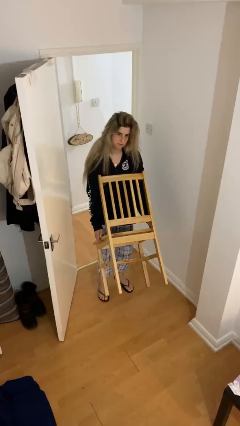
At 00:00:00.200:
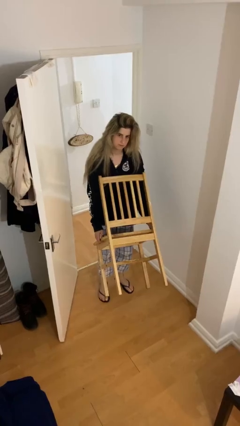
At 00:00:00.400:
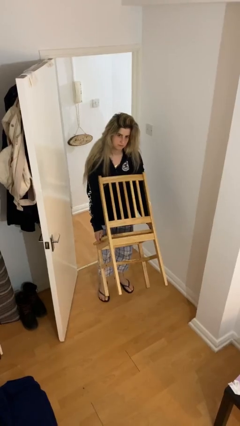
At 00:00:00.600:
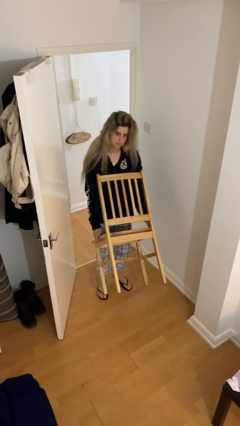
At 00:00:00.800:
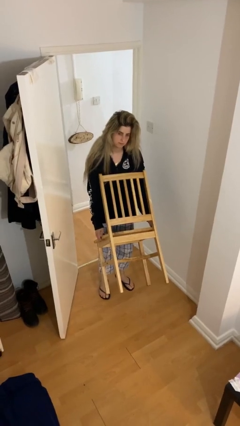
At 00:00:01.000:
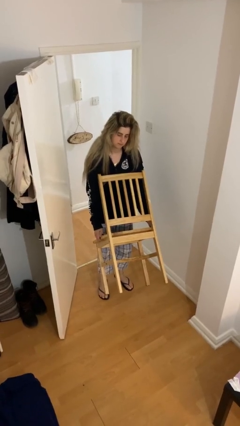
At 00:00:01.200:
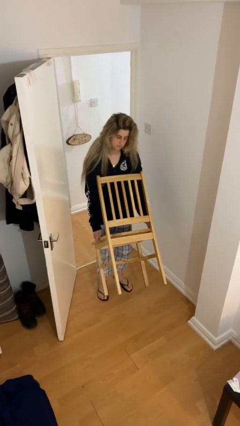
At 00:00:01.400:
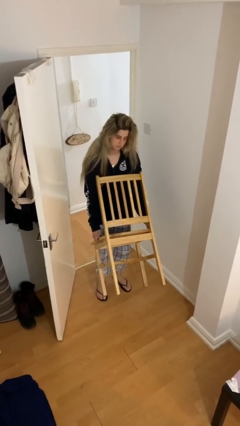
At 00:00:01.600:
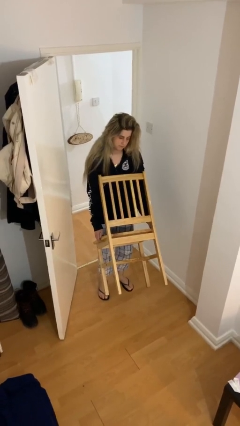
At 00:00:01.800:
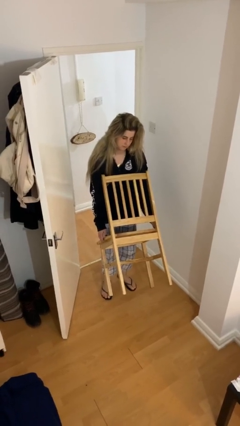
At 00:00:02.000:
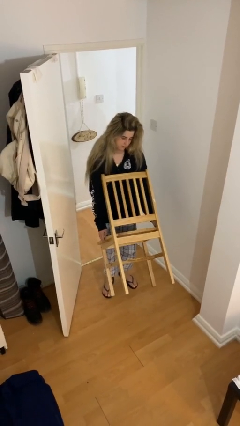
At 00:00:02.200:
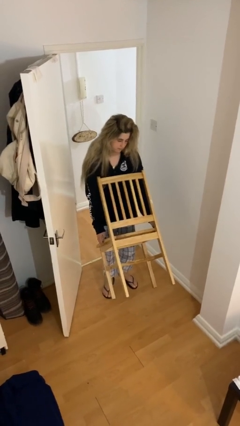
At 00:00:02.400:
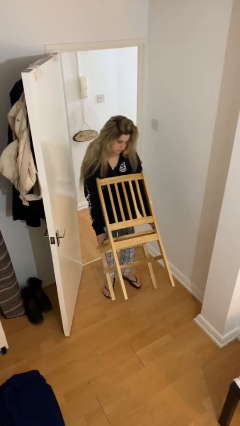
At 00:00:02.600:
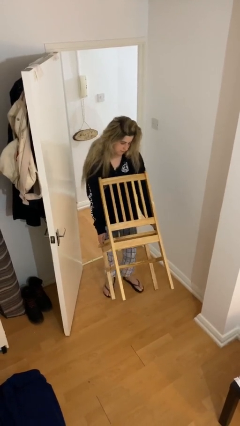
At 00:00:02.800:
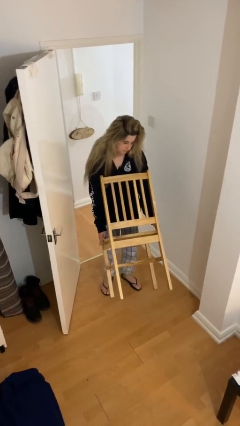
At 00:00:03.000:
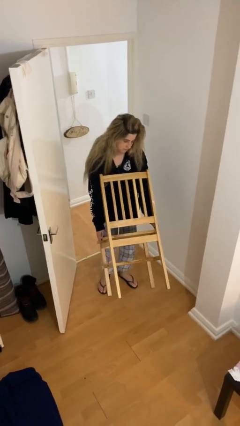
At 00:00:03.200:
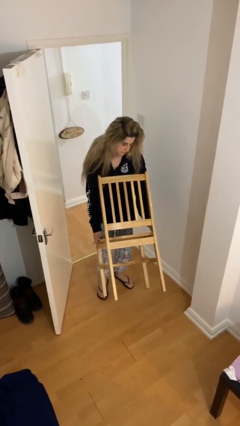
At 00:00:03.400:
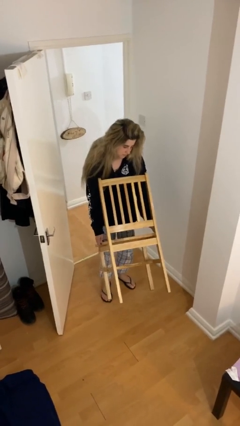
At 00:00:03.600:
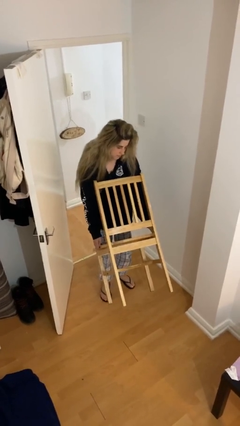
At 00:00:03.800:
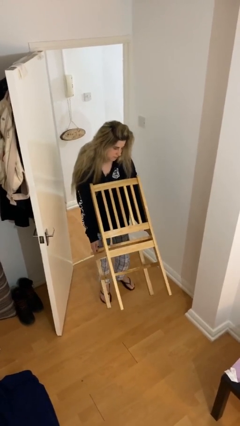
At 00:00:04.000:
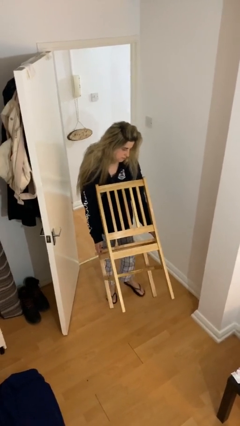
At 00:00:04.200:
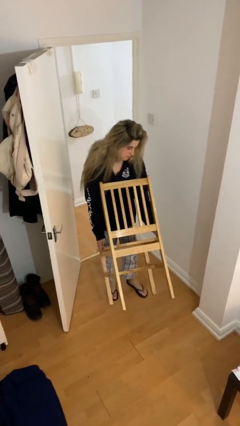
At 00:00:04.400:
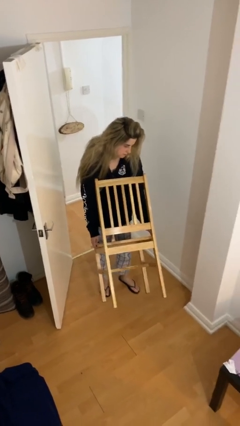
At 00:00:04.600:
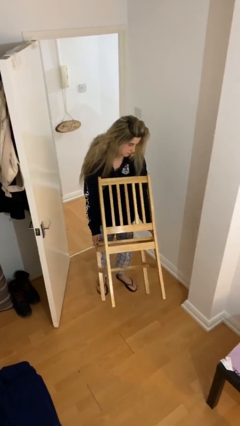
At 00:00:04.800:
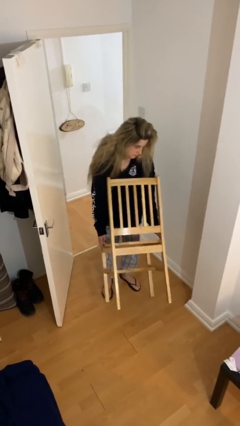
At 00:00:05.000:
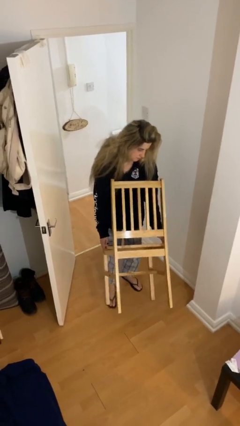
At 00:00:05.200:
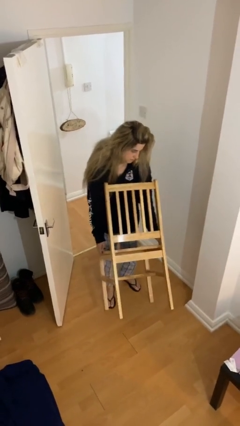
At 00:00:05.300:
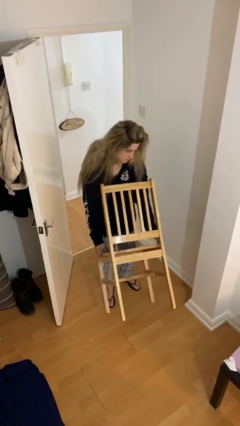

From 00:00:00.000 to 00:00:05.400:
person carries heavy object

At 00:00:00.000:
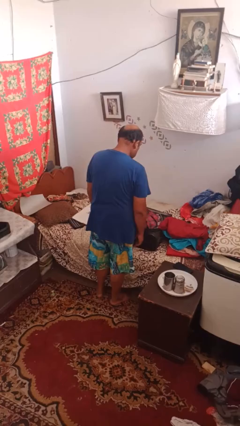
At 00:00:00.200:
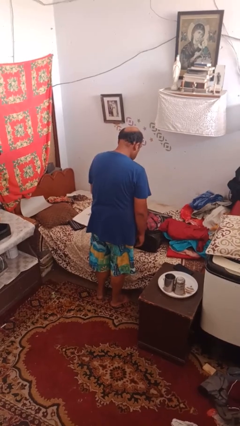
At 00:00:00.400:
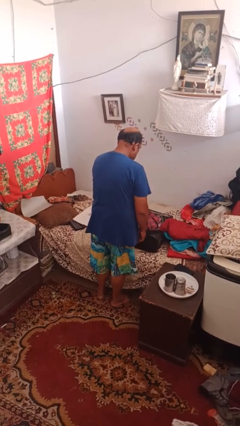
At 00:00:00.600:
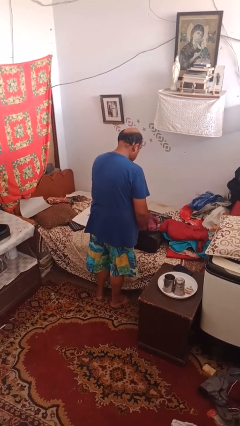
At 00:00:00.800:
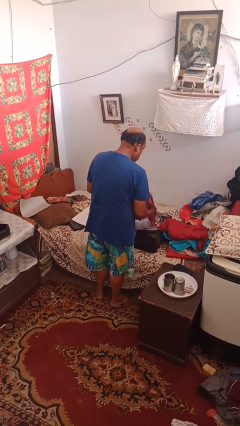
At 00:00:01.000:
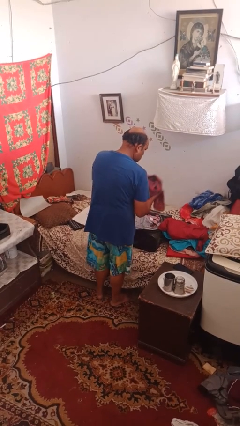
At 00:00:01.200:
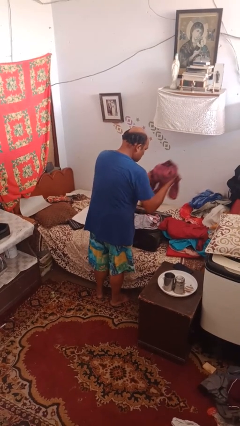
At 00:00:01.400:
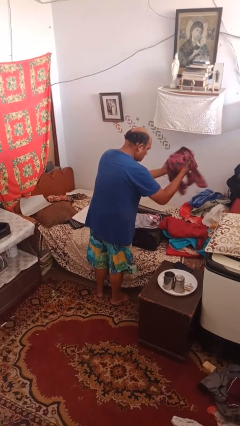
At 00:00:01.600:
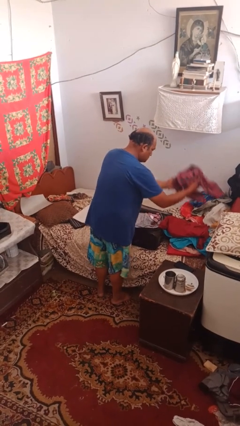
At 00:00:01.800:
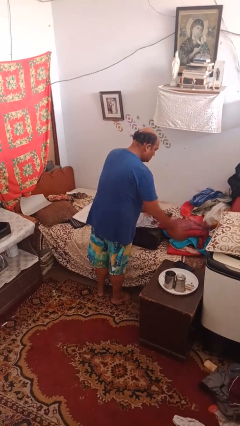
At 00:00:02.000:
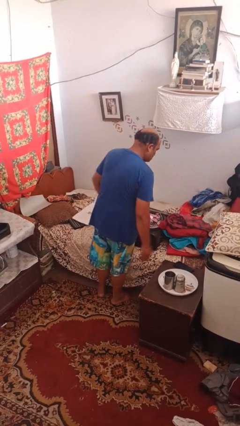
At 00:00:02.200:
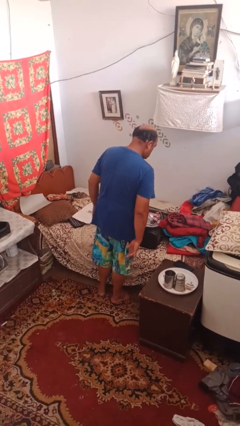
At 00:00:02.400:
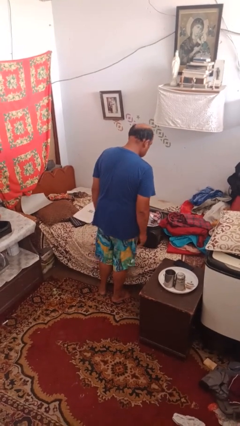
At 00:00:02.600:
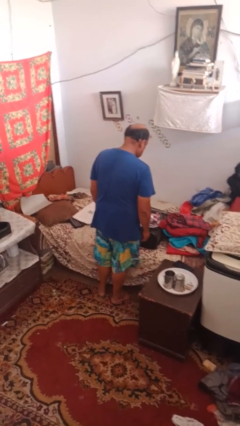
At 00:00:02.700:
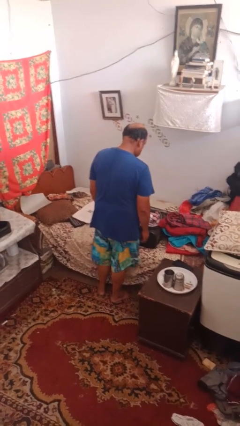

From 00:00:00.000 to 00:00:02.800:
person unloads clothes from suitcase

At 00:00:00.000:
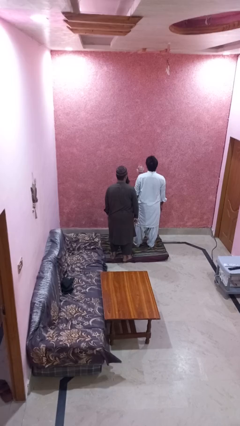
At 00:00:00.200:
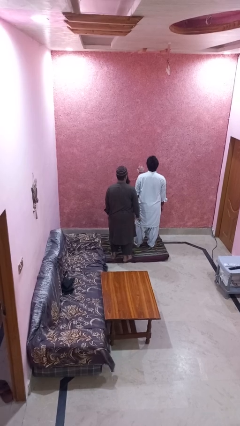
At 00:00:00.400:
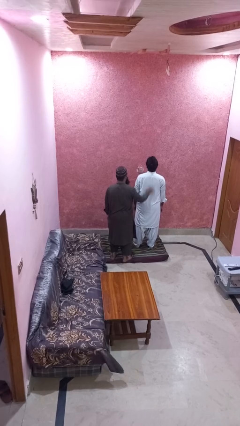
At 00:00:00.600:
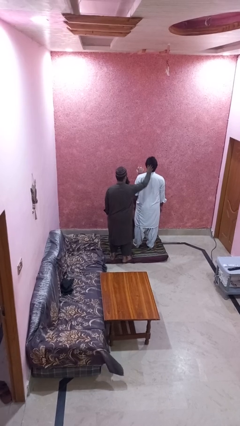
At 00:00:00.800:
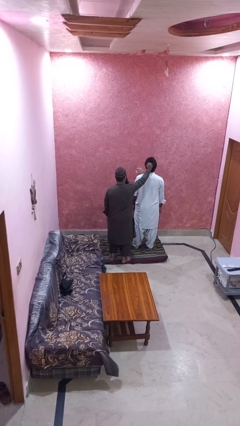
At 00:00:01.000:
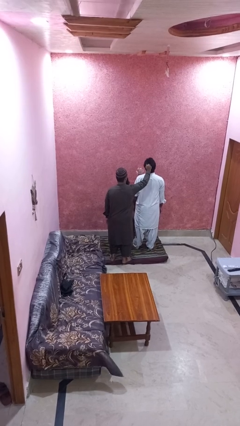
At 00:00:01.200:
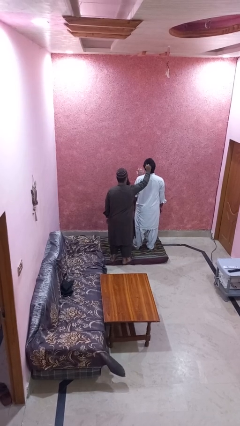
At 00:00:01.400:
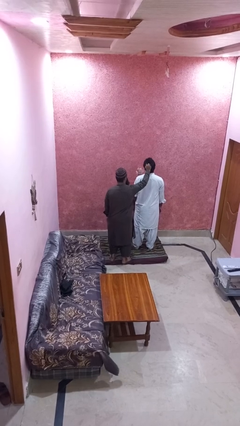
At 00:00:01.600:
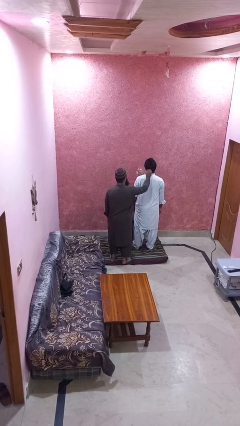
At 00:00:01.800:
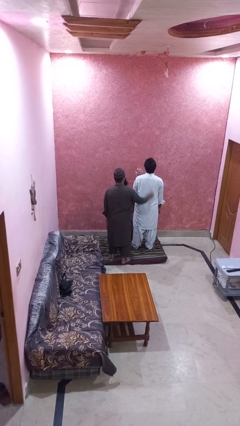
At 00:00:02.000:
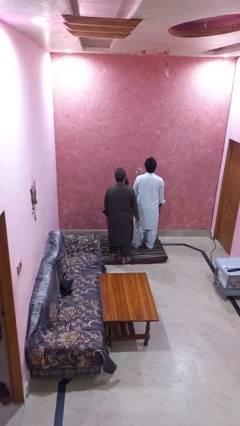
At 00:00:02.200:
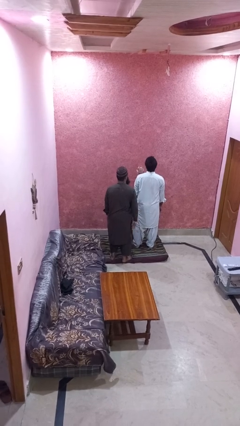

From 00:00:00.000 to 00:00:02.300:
person grabs person by hair

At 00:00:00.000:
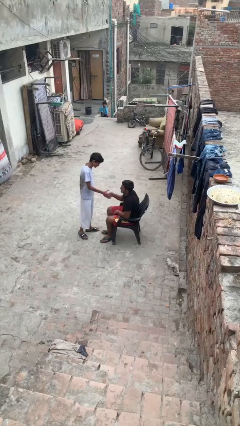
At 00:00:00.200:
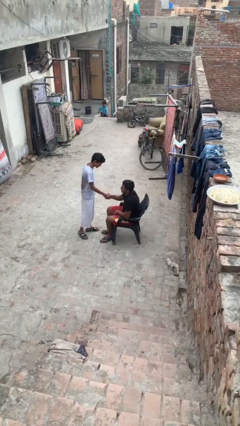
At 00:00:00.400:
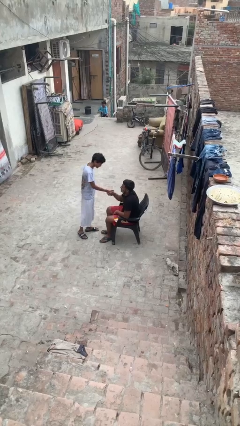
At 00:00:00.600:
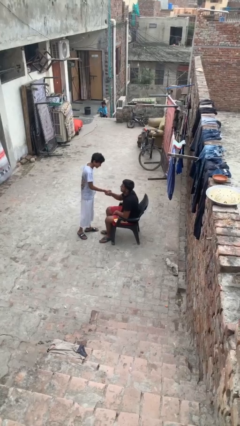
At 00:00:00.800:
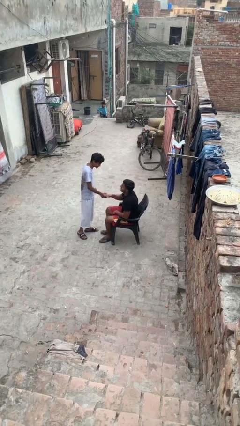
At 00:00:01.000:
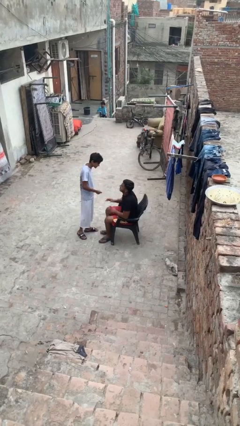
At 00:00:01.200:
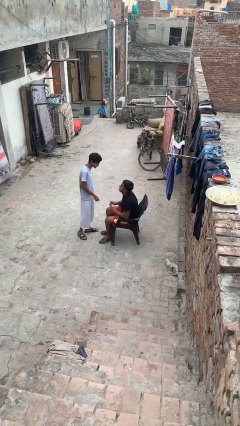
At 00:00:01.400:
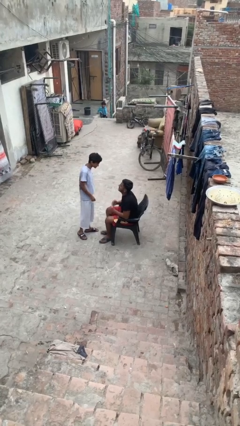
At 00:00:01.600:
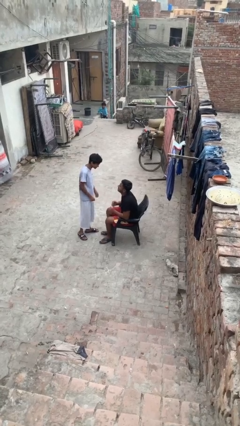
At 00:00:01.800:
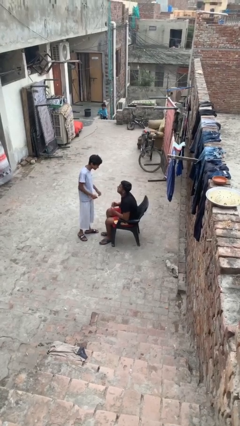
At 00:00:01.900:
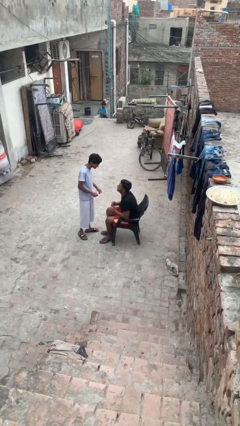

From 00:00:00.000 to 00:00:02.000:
person shakes hand

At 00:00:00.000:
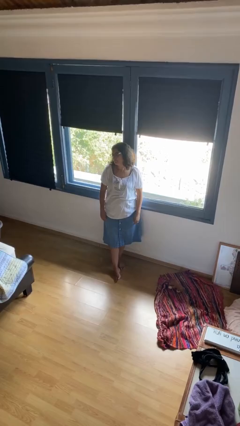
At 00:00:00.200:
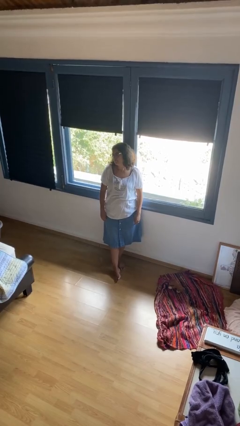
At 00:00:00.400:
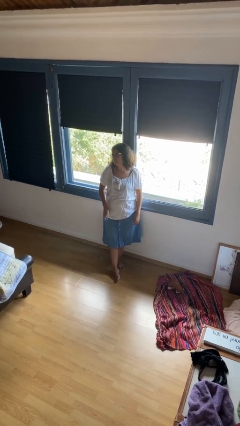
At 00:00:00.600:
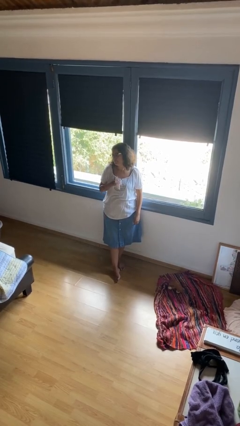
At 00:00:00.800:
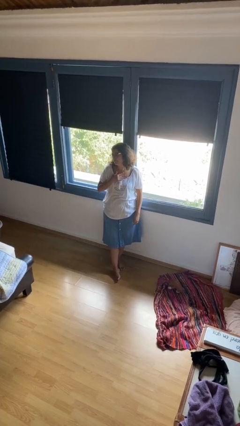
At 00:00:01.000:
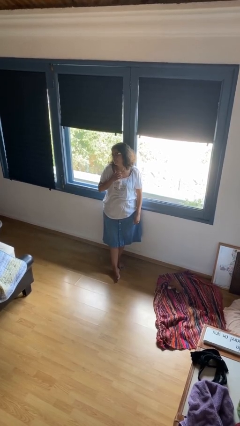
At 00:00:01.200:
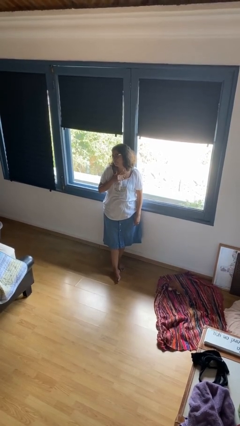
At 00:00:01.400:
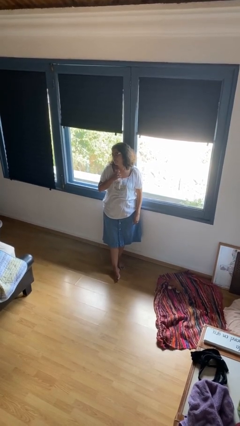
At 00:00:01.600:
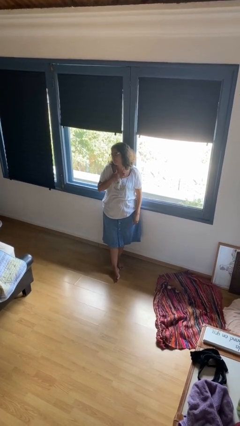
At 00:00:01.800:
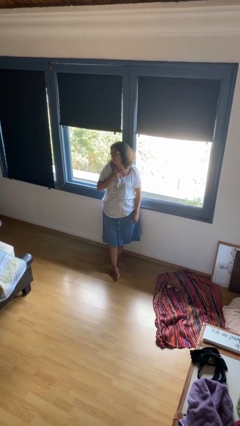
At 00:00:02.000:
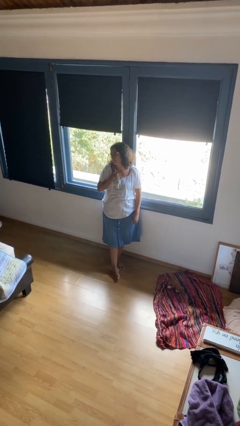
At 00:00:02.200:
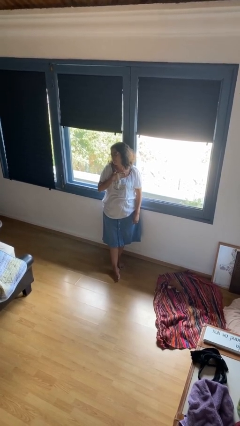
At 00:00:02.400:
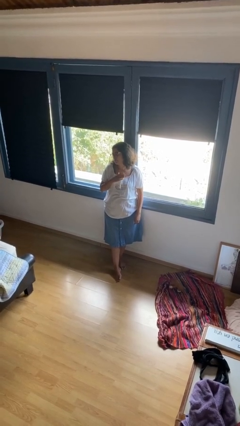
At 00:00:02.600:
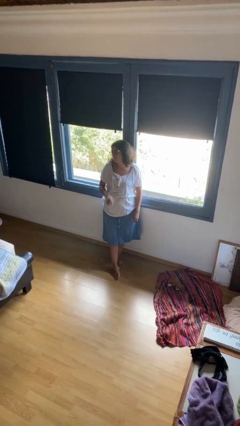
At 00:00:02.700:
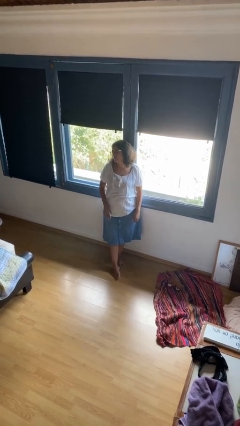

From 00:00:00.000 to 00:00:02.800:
person drums on chest

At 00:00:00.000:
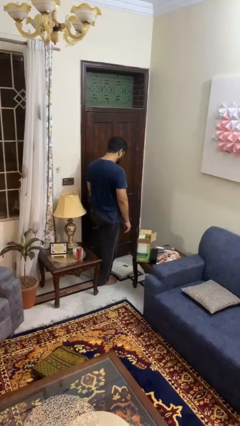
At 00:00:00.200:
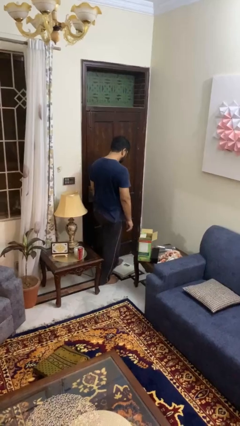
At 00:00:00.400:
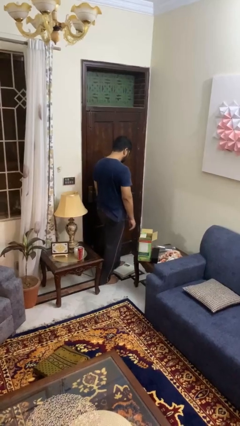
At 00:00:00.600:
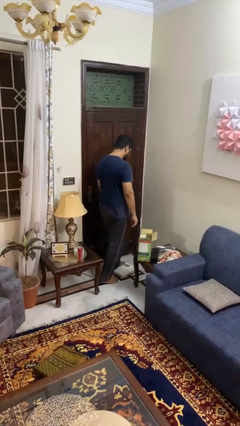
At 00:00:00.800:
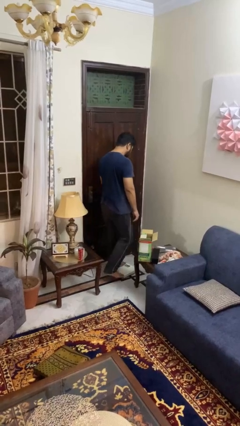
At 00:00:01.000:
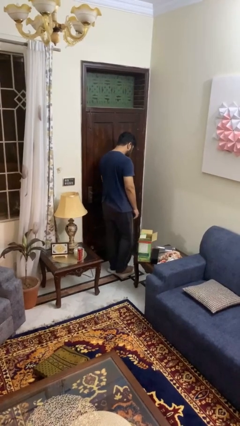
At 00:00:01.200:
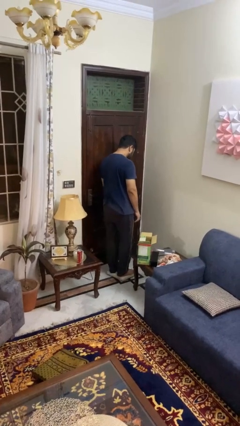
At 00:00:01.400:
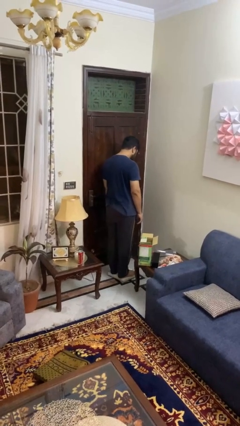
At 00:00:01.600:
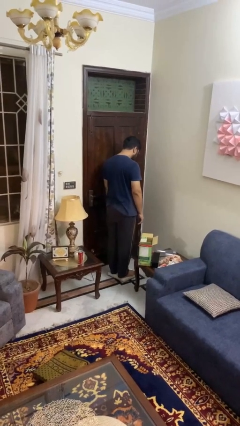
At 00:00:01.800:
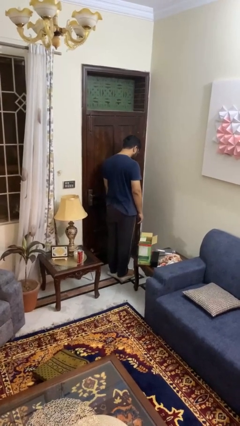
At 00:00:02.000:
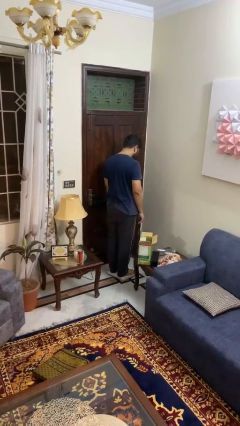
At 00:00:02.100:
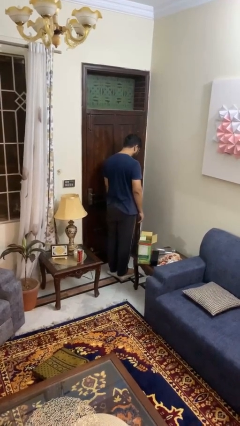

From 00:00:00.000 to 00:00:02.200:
person uses bodyweight scale
